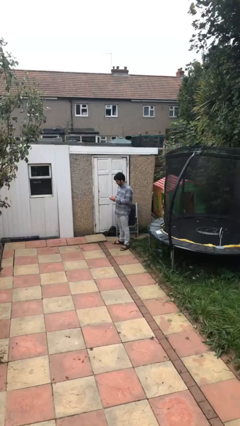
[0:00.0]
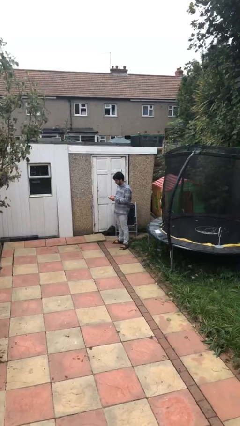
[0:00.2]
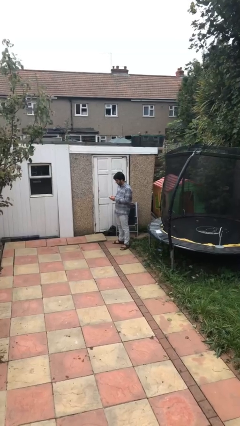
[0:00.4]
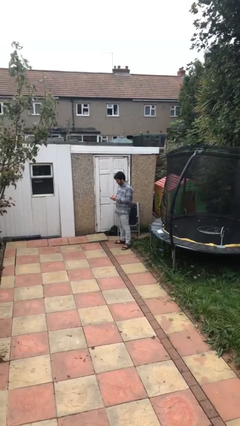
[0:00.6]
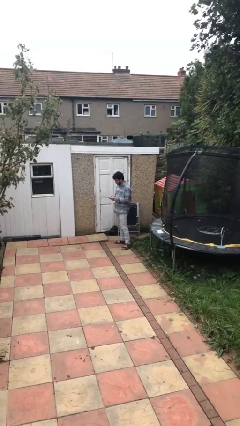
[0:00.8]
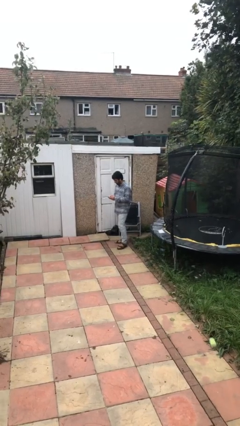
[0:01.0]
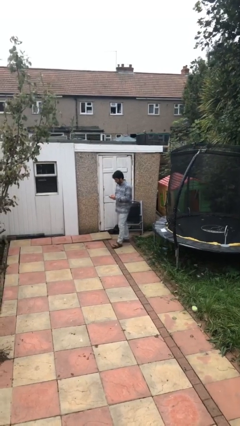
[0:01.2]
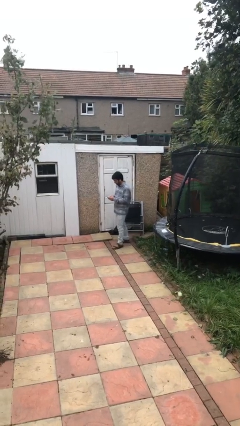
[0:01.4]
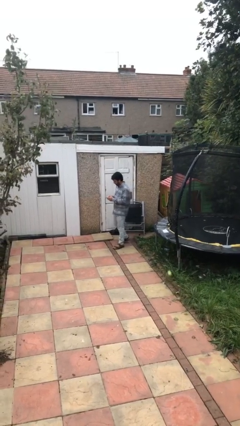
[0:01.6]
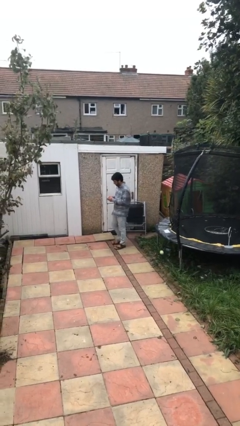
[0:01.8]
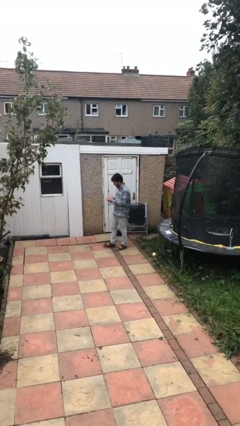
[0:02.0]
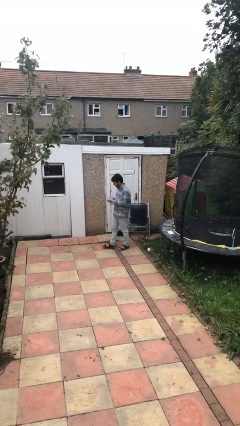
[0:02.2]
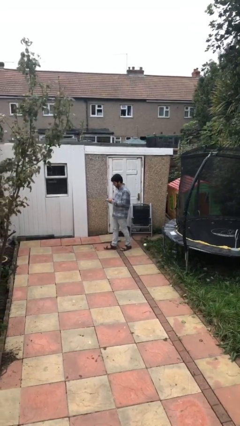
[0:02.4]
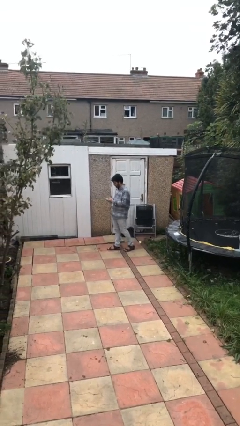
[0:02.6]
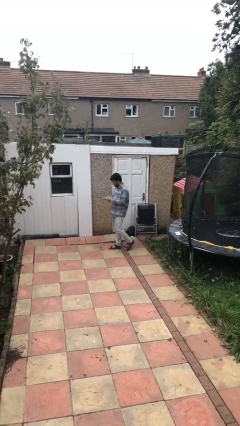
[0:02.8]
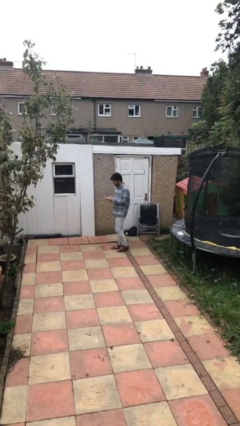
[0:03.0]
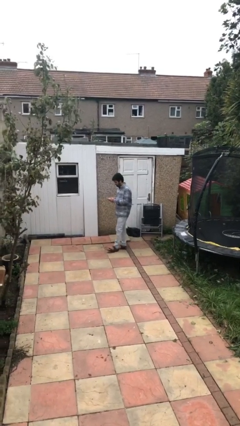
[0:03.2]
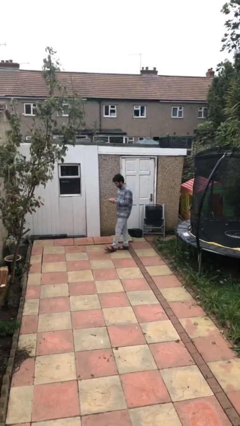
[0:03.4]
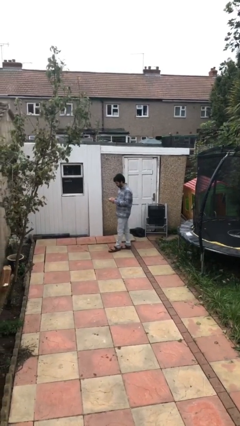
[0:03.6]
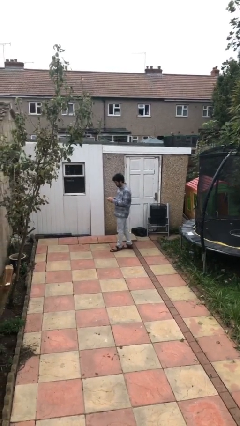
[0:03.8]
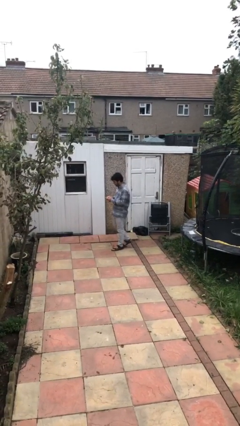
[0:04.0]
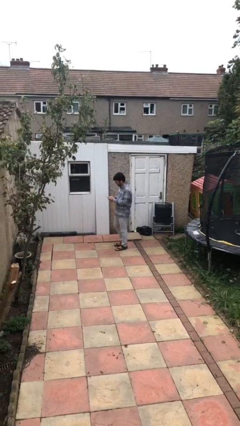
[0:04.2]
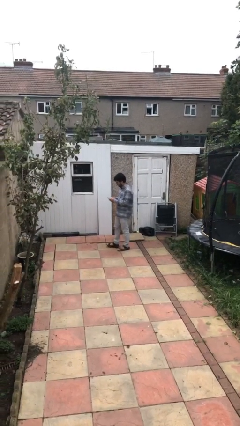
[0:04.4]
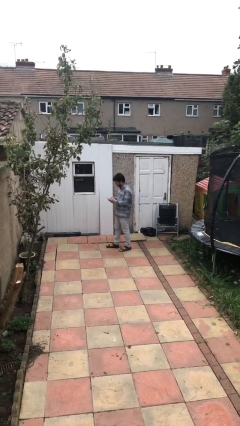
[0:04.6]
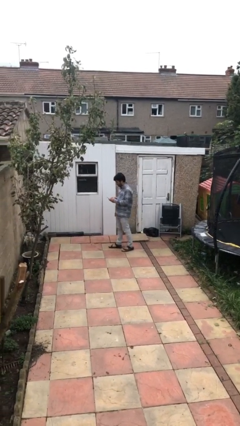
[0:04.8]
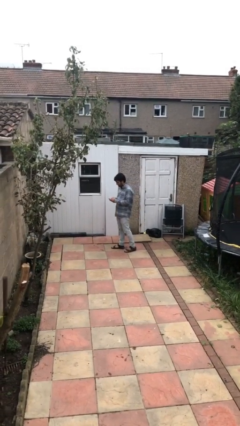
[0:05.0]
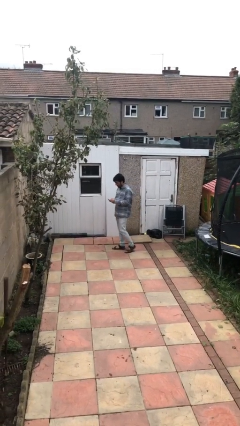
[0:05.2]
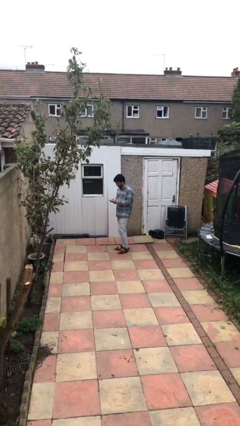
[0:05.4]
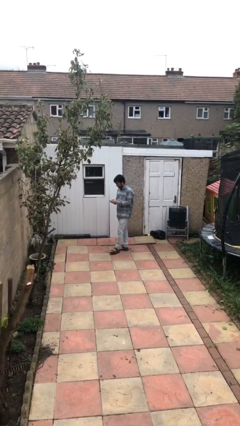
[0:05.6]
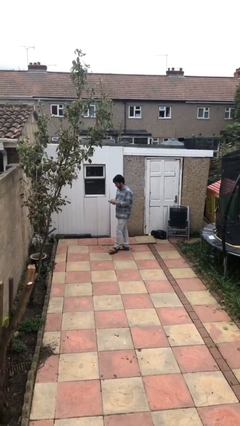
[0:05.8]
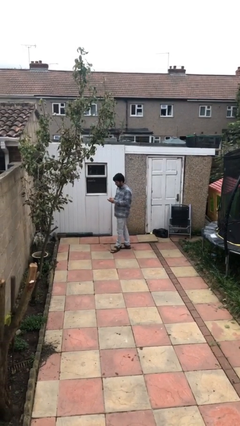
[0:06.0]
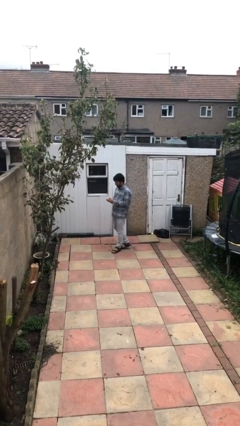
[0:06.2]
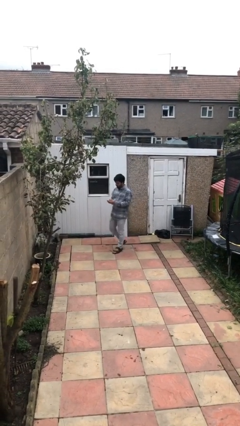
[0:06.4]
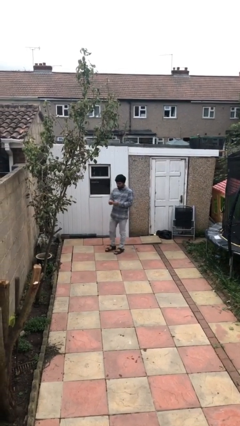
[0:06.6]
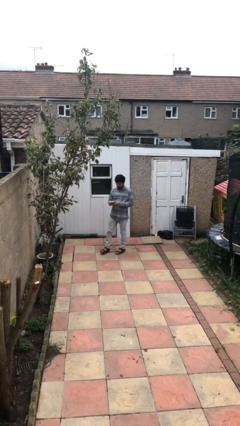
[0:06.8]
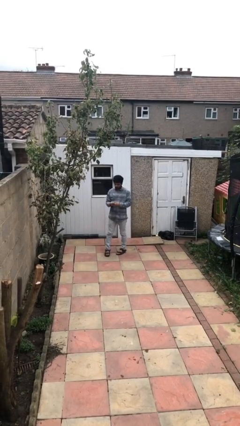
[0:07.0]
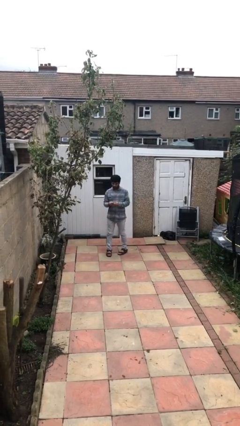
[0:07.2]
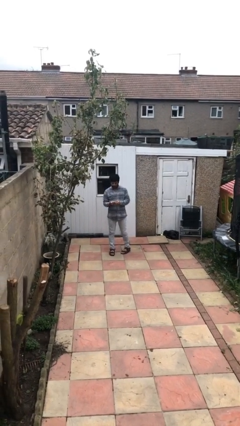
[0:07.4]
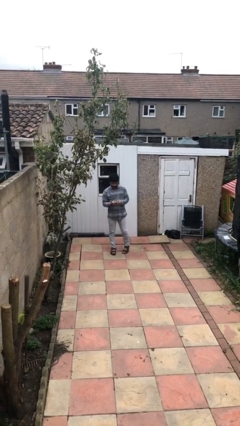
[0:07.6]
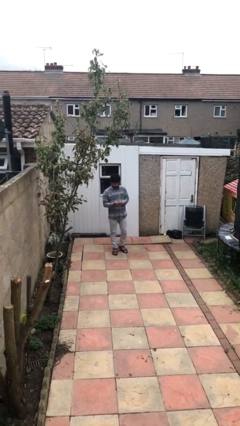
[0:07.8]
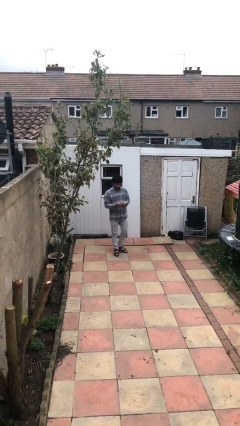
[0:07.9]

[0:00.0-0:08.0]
person texts on phone

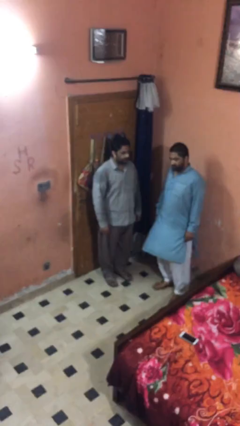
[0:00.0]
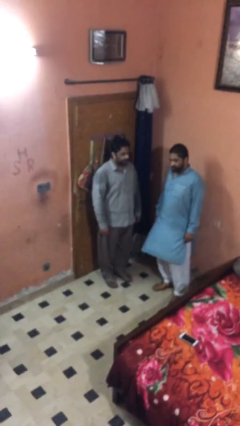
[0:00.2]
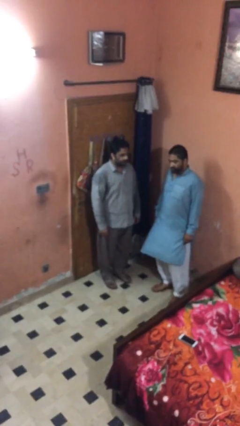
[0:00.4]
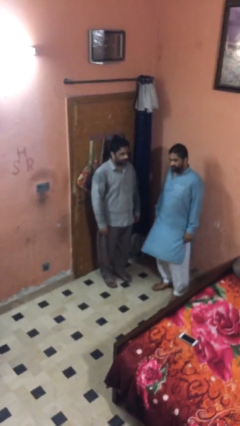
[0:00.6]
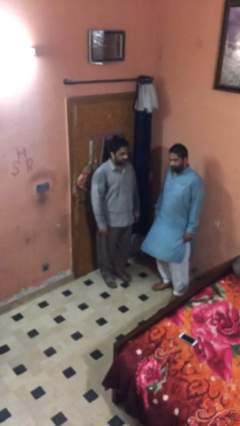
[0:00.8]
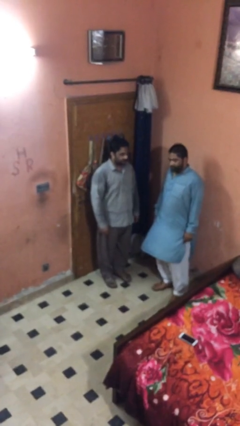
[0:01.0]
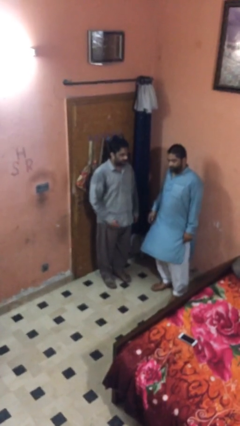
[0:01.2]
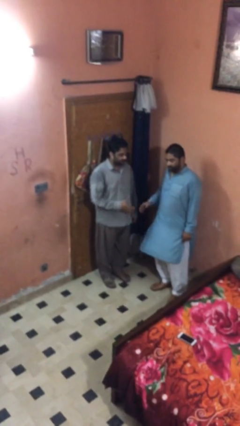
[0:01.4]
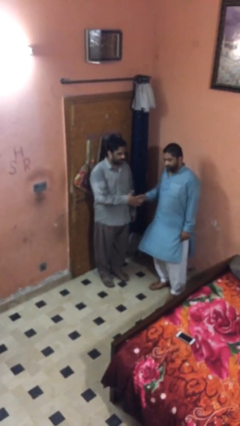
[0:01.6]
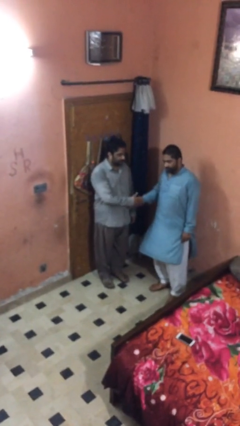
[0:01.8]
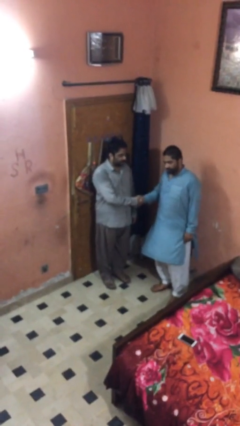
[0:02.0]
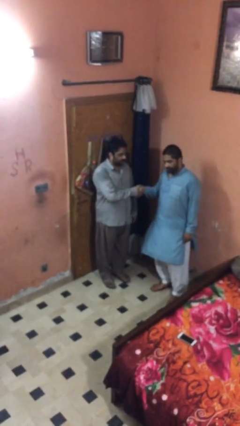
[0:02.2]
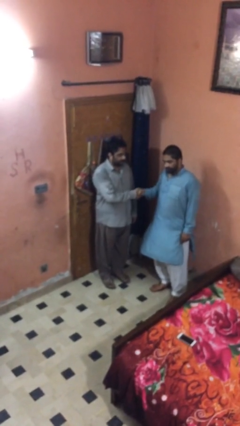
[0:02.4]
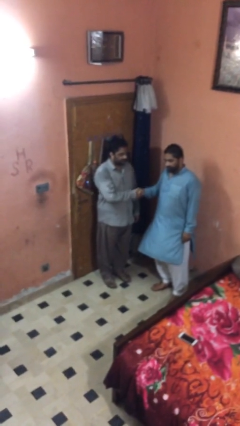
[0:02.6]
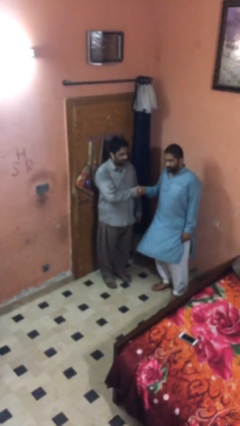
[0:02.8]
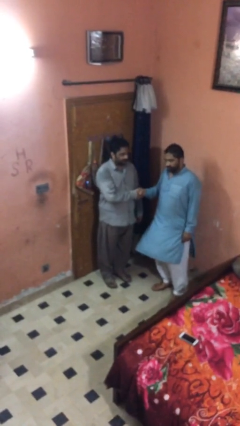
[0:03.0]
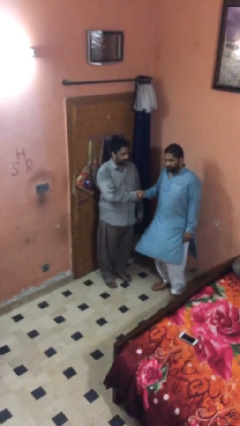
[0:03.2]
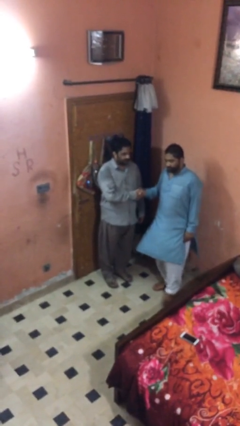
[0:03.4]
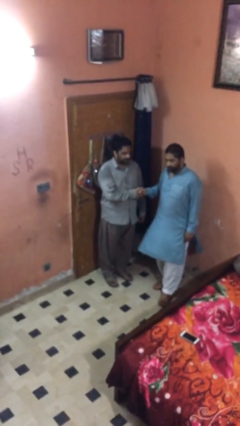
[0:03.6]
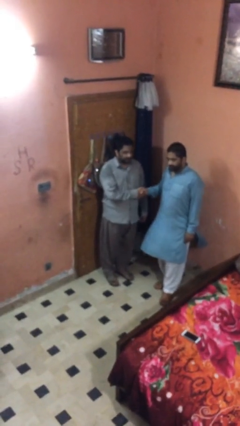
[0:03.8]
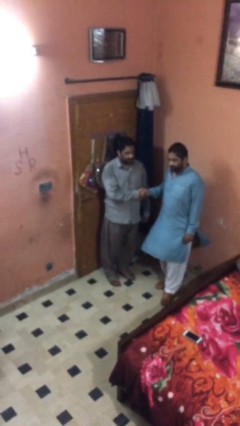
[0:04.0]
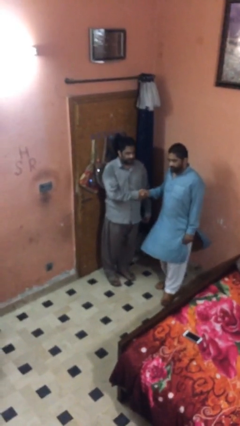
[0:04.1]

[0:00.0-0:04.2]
person shakes hand

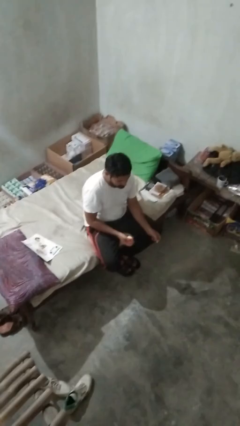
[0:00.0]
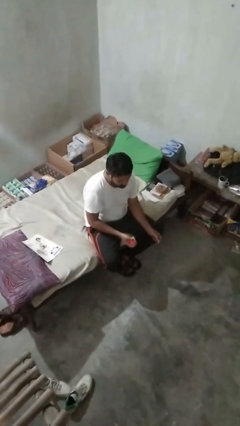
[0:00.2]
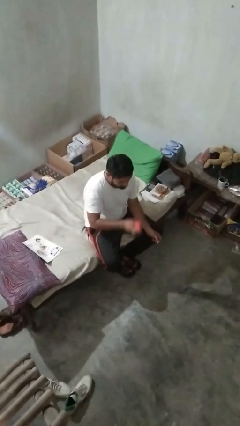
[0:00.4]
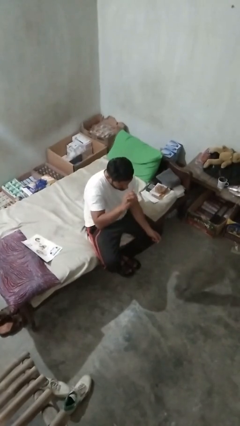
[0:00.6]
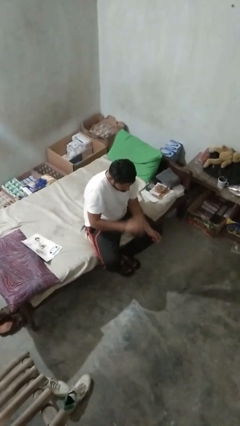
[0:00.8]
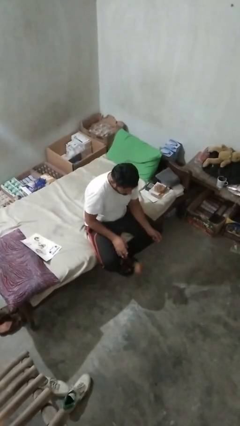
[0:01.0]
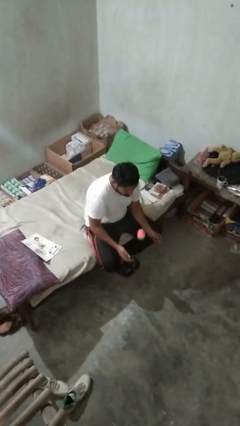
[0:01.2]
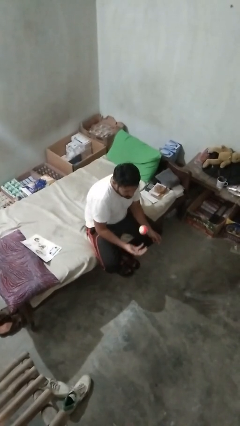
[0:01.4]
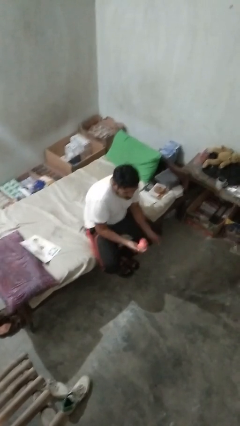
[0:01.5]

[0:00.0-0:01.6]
person bounces ball on floor

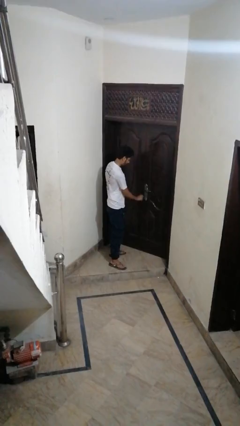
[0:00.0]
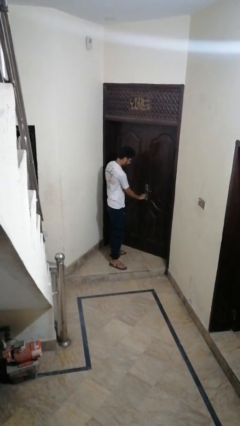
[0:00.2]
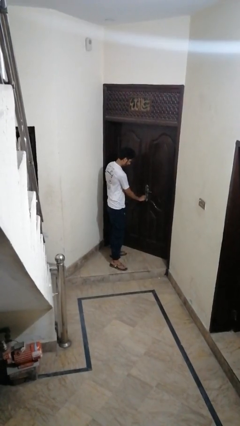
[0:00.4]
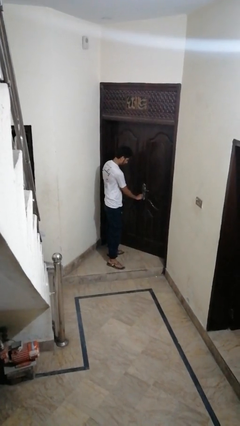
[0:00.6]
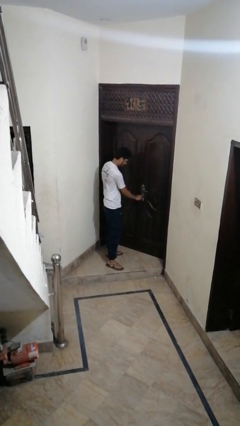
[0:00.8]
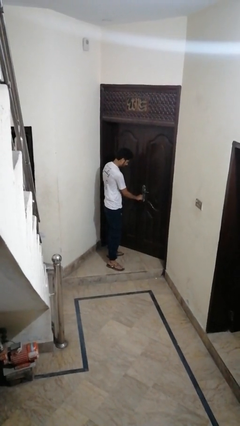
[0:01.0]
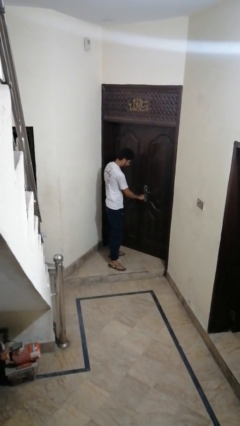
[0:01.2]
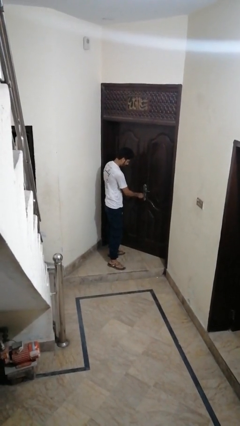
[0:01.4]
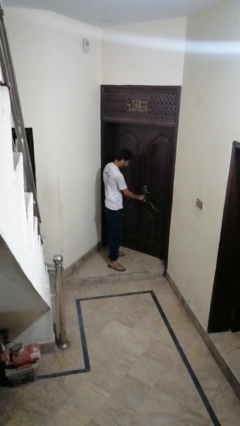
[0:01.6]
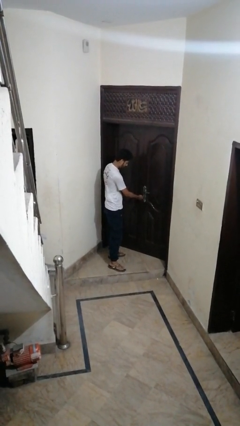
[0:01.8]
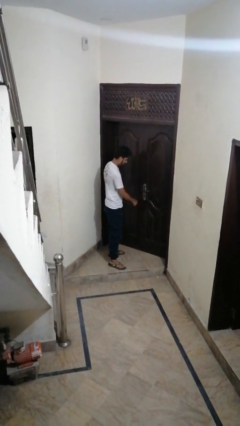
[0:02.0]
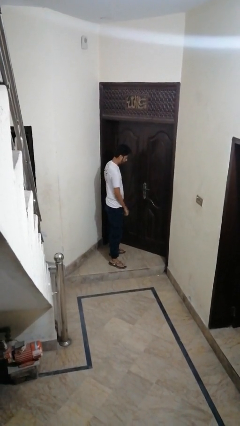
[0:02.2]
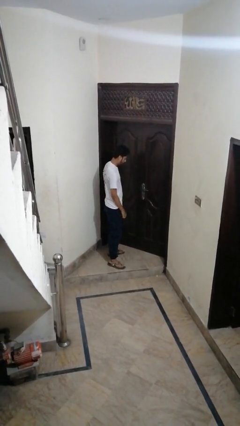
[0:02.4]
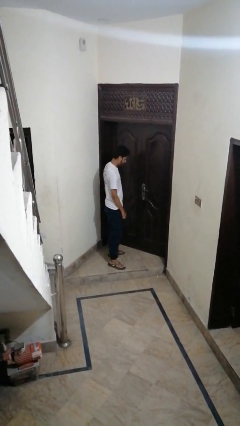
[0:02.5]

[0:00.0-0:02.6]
person unlocks door with keys

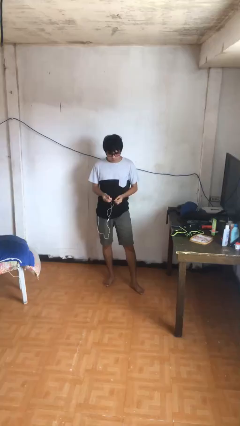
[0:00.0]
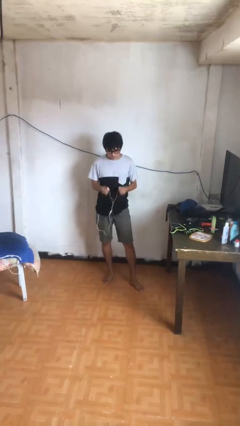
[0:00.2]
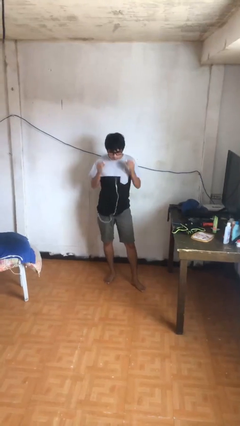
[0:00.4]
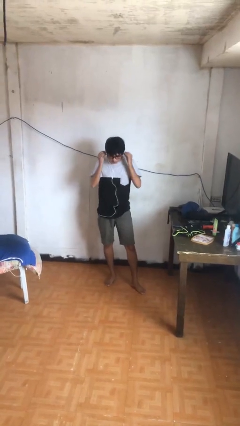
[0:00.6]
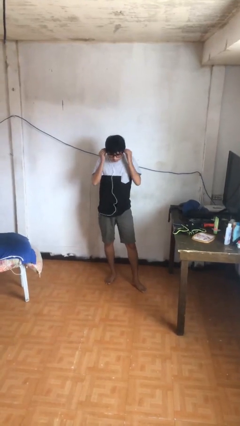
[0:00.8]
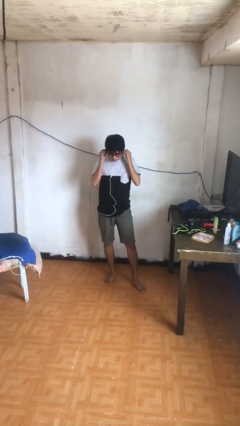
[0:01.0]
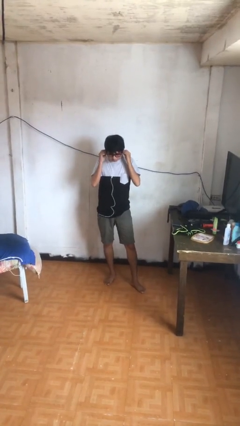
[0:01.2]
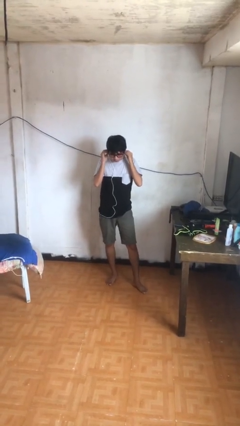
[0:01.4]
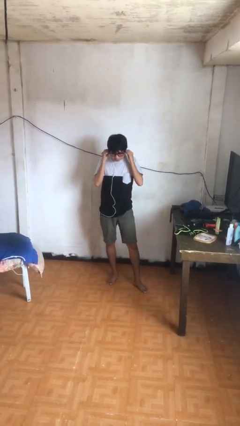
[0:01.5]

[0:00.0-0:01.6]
person puts on headphones
